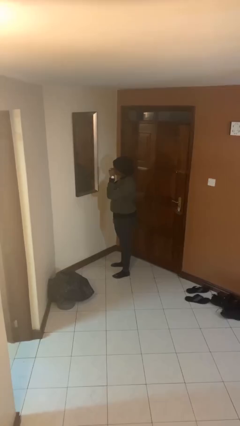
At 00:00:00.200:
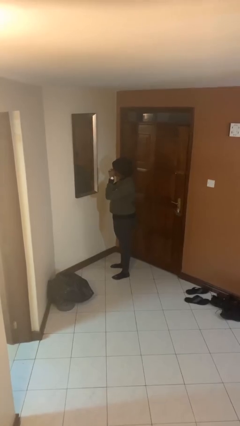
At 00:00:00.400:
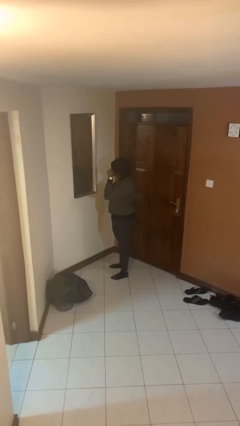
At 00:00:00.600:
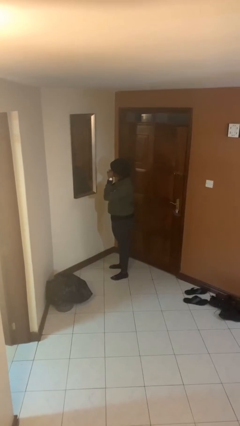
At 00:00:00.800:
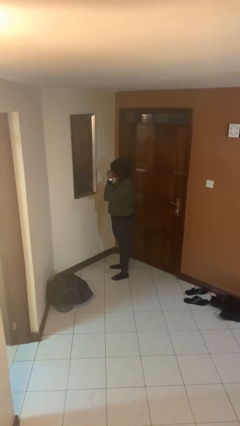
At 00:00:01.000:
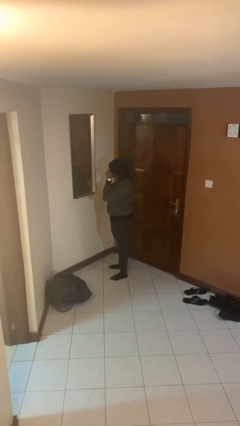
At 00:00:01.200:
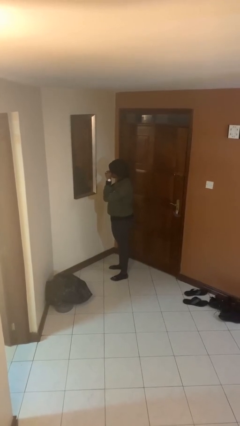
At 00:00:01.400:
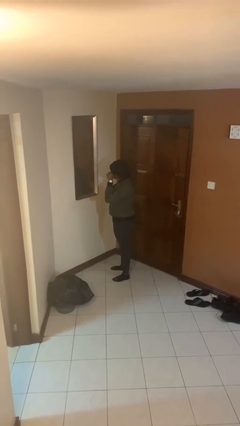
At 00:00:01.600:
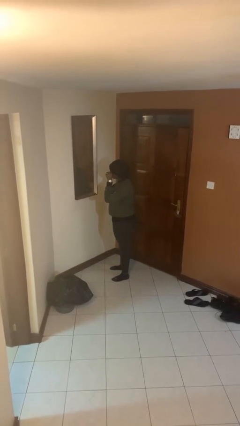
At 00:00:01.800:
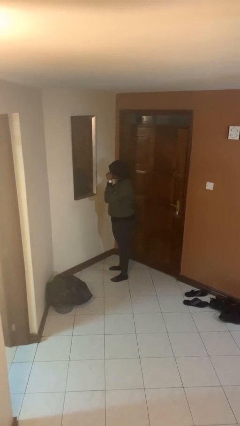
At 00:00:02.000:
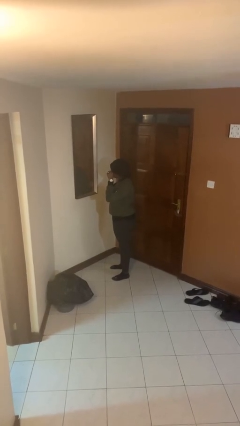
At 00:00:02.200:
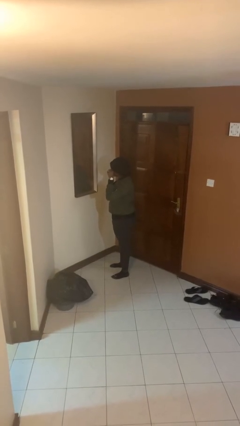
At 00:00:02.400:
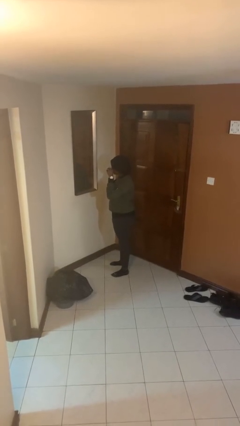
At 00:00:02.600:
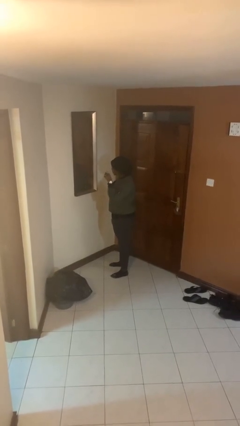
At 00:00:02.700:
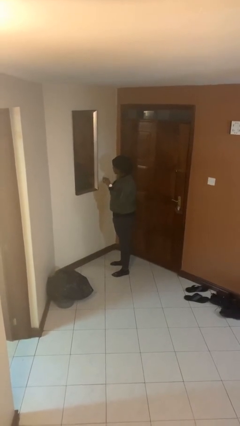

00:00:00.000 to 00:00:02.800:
person applies eye makeup

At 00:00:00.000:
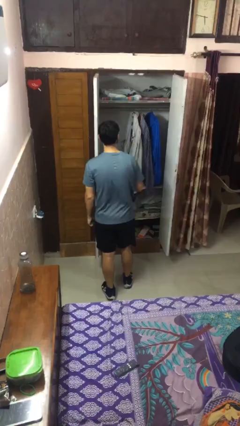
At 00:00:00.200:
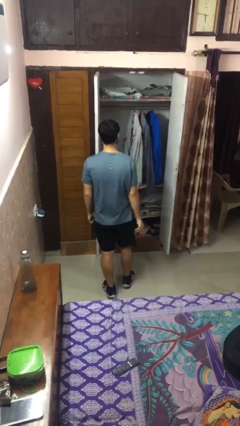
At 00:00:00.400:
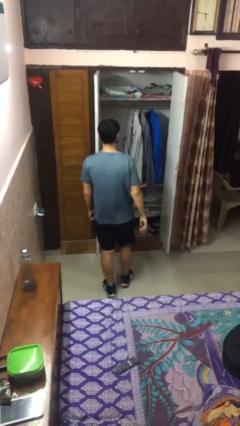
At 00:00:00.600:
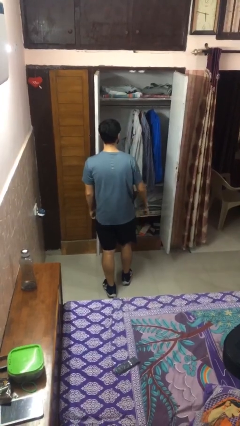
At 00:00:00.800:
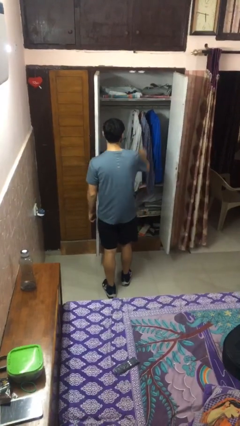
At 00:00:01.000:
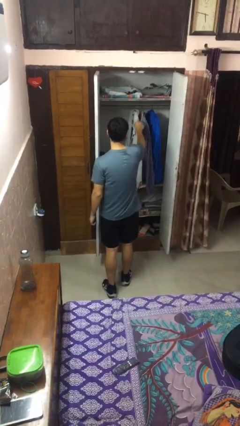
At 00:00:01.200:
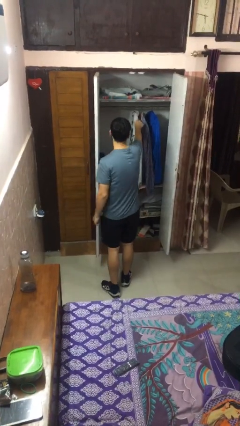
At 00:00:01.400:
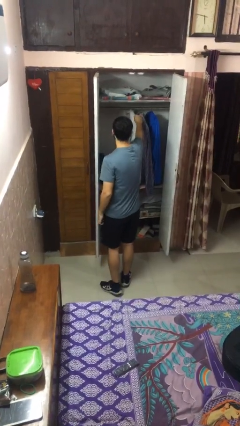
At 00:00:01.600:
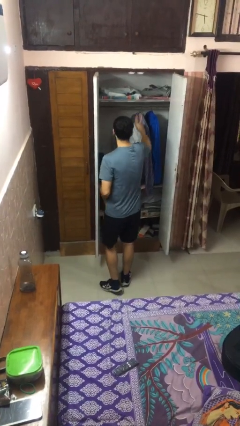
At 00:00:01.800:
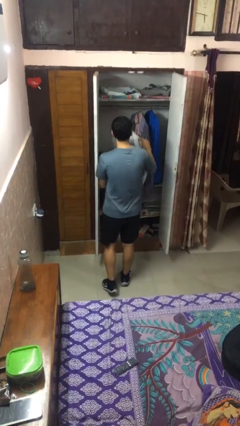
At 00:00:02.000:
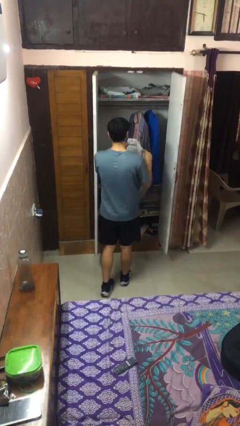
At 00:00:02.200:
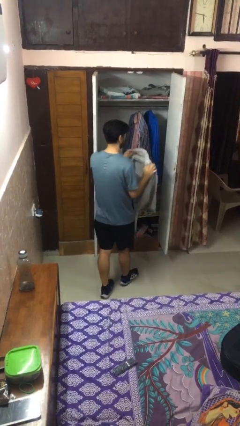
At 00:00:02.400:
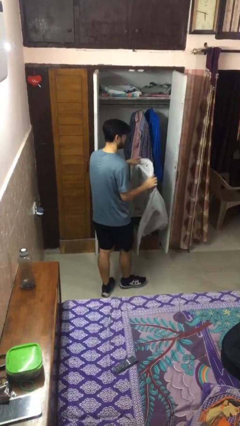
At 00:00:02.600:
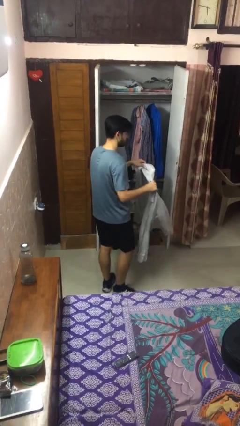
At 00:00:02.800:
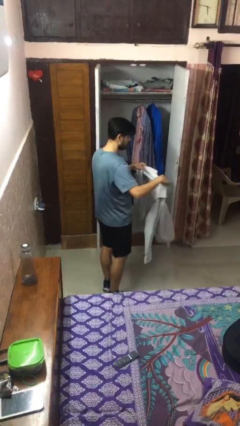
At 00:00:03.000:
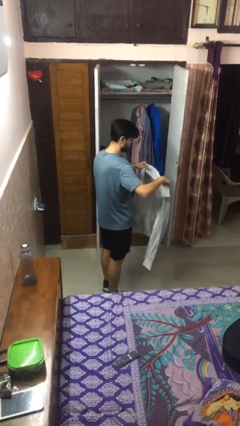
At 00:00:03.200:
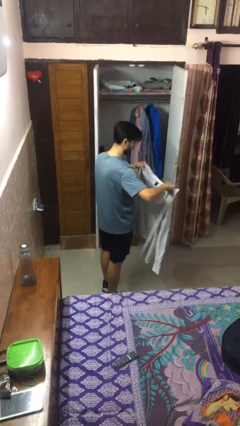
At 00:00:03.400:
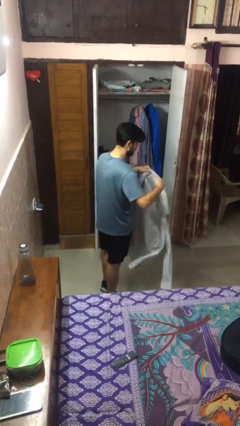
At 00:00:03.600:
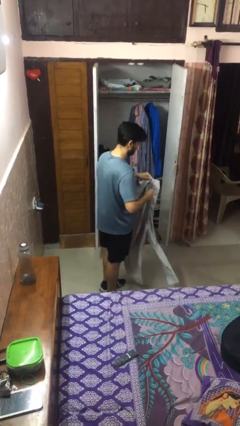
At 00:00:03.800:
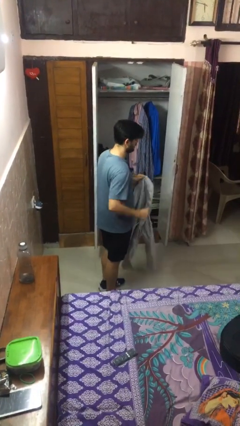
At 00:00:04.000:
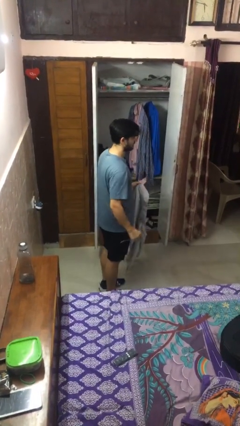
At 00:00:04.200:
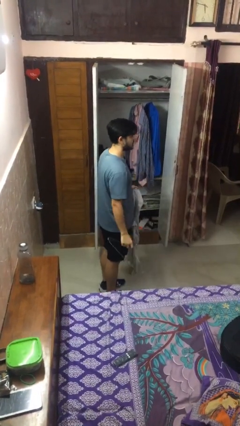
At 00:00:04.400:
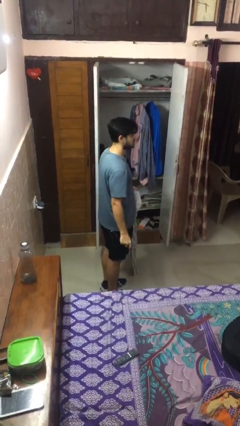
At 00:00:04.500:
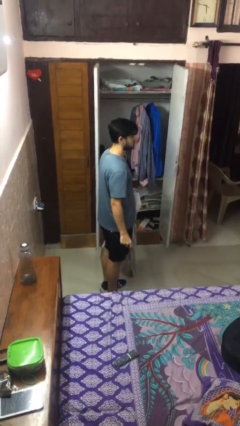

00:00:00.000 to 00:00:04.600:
person takes clothes from closet

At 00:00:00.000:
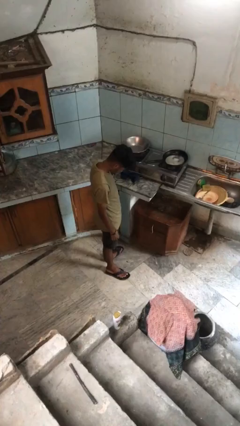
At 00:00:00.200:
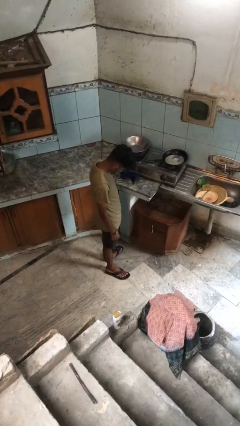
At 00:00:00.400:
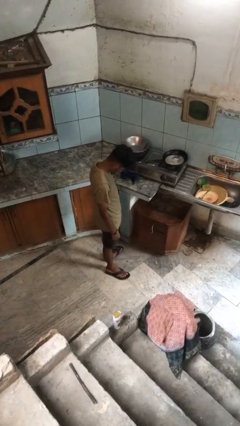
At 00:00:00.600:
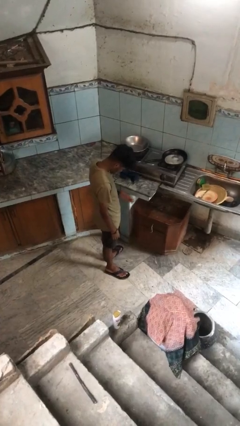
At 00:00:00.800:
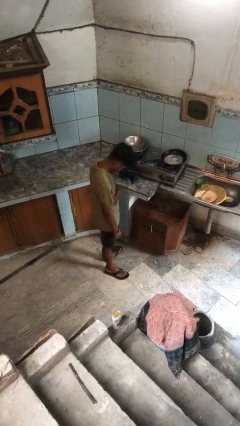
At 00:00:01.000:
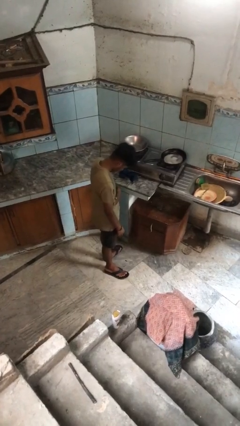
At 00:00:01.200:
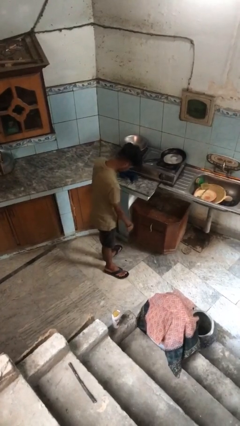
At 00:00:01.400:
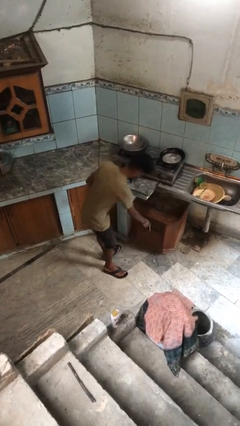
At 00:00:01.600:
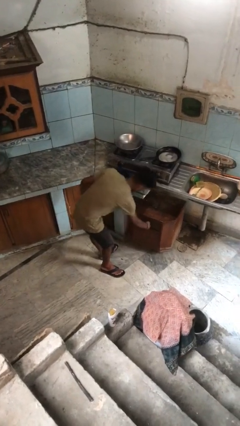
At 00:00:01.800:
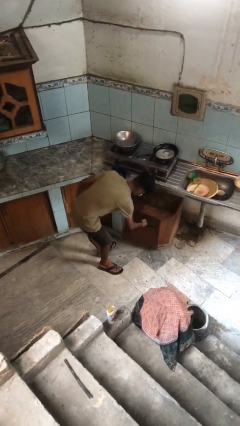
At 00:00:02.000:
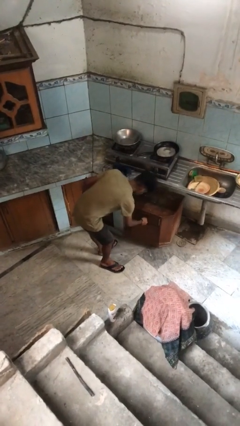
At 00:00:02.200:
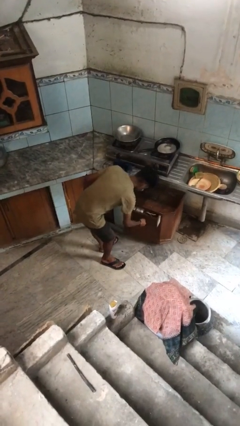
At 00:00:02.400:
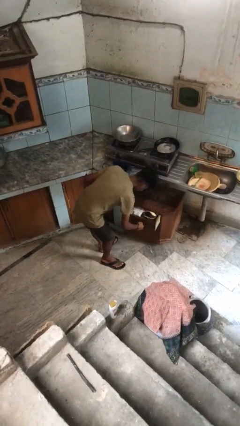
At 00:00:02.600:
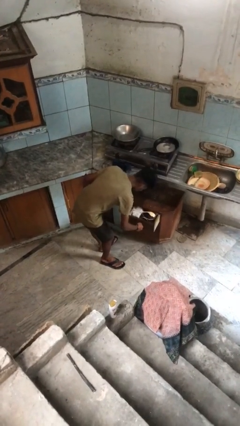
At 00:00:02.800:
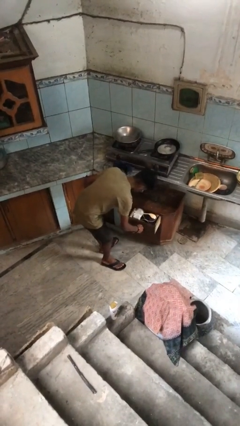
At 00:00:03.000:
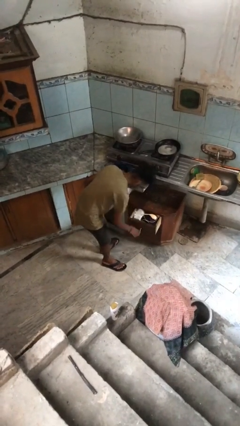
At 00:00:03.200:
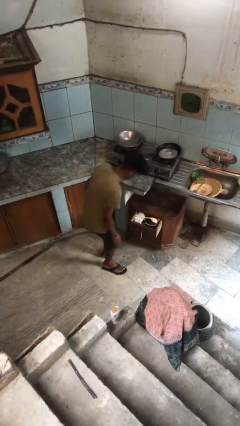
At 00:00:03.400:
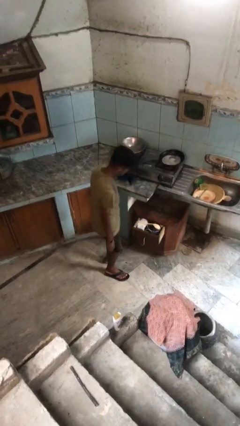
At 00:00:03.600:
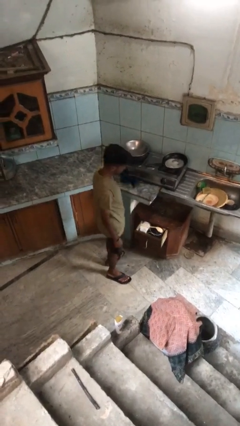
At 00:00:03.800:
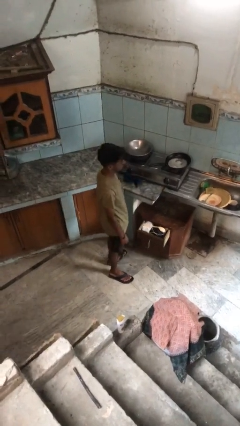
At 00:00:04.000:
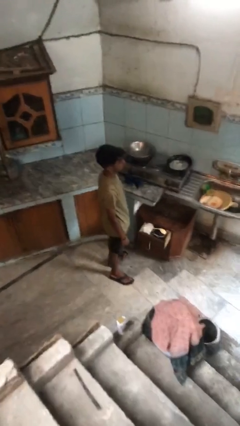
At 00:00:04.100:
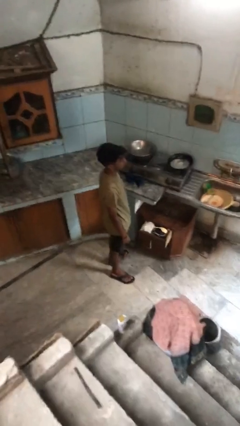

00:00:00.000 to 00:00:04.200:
person opens kitchen drawer

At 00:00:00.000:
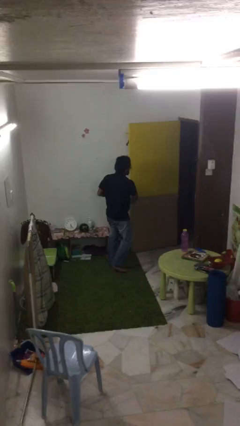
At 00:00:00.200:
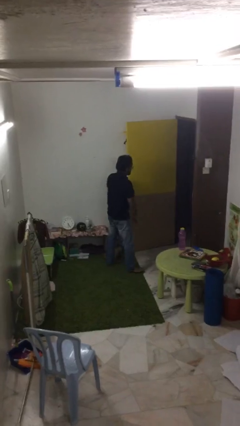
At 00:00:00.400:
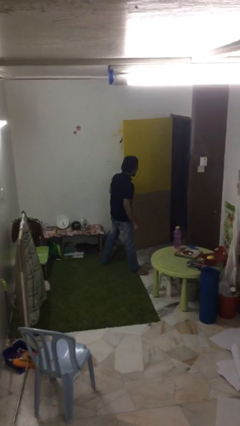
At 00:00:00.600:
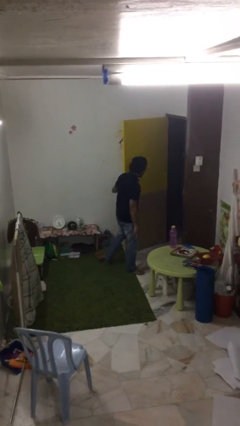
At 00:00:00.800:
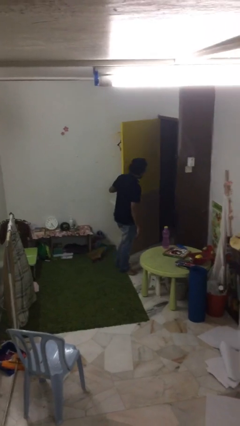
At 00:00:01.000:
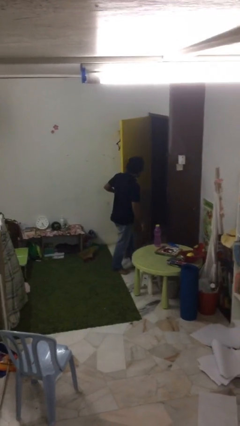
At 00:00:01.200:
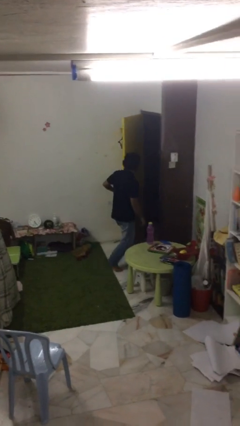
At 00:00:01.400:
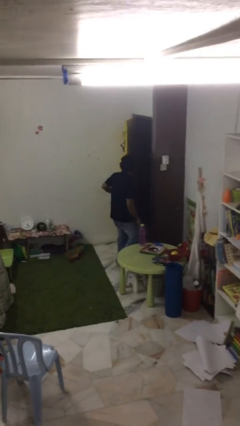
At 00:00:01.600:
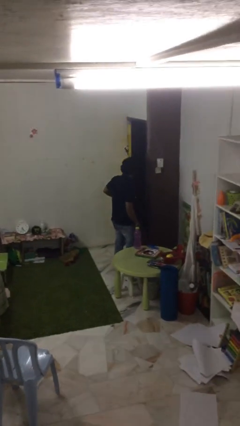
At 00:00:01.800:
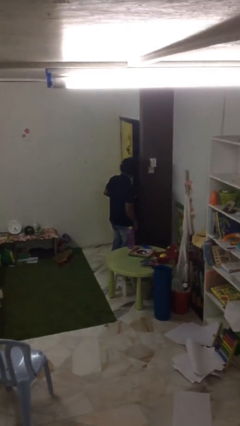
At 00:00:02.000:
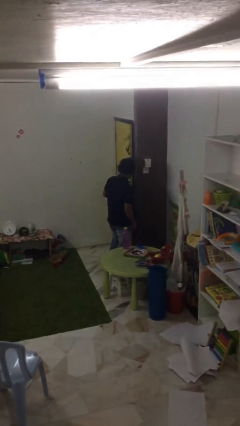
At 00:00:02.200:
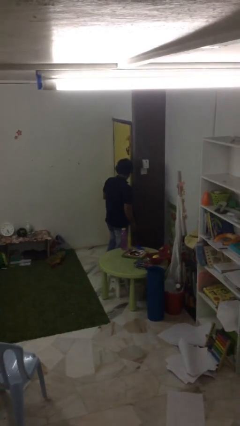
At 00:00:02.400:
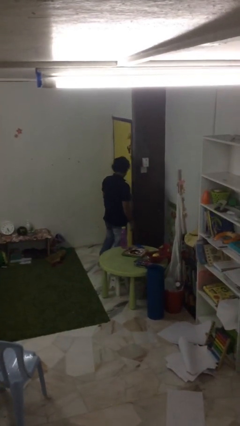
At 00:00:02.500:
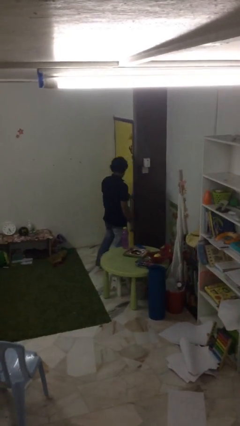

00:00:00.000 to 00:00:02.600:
person closes facility door

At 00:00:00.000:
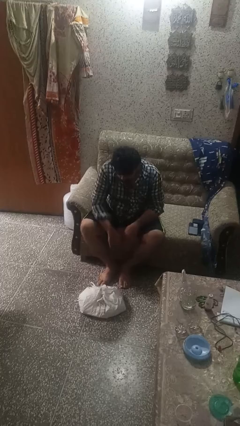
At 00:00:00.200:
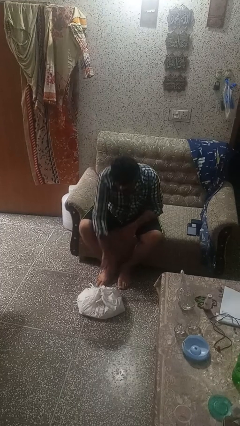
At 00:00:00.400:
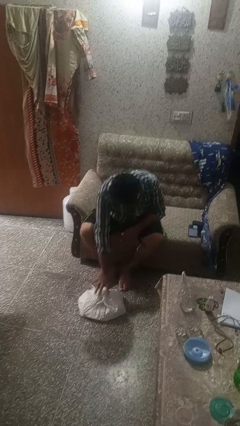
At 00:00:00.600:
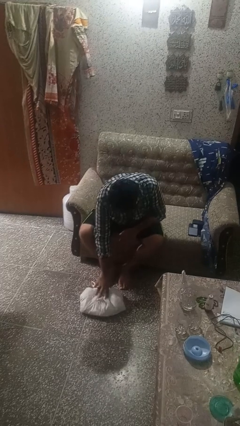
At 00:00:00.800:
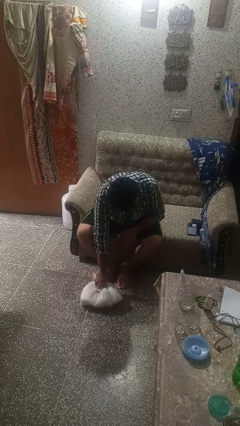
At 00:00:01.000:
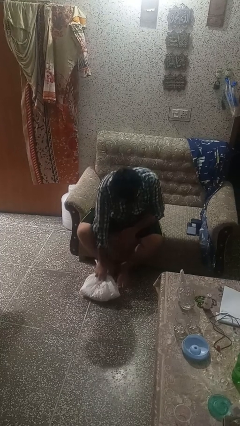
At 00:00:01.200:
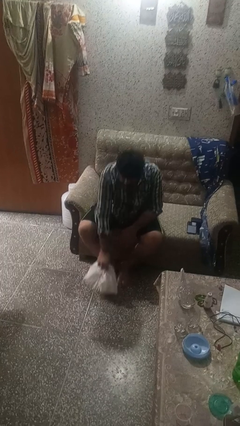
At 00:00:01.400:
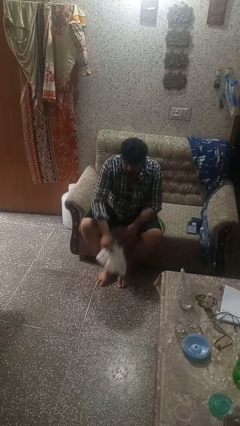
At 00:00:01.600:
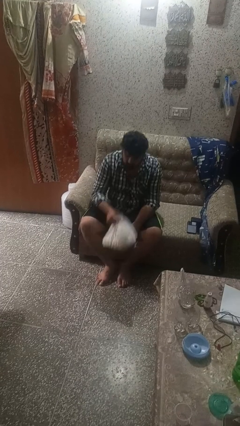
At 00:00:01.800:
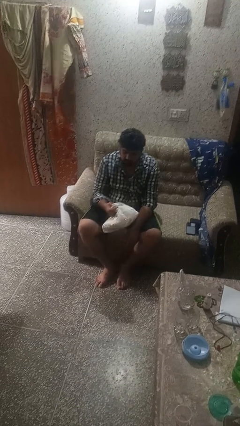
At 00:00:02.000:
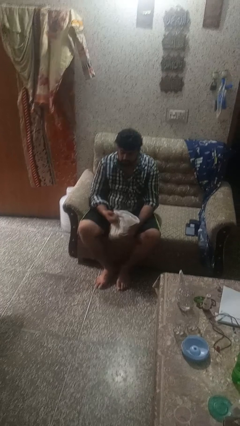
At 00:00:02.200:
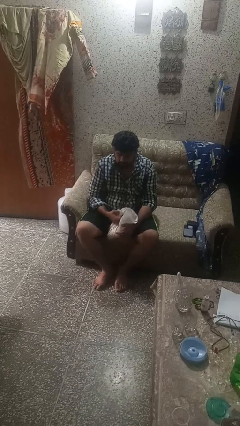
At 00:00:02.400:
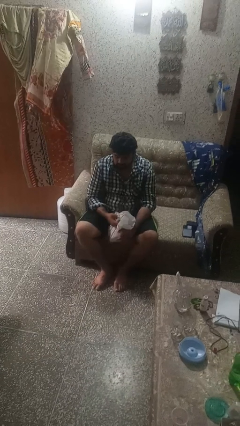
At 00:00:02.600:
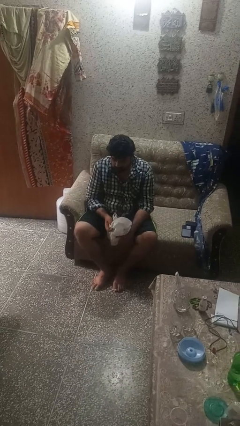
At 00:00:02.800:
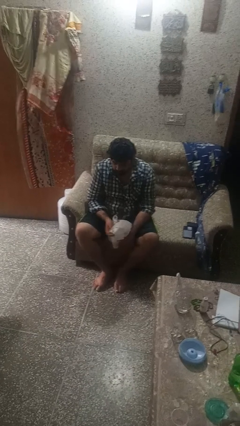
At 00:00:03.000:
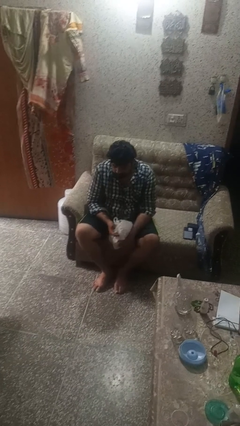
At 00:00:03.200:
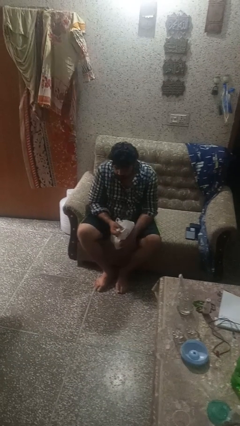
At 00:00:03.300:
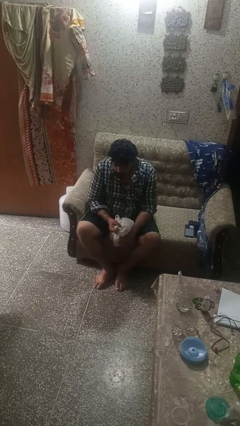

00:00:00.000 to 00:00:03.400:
person picks up object from floor
